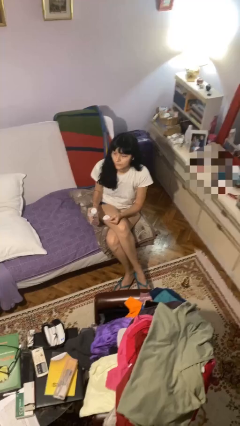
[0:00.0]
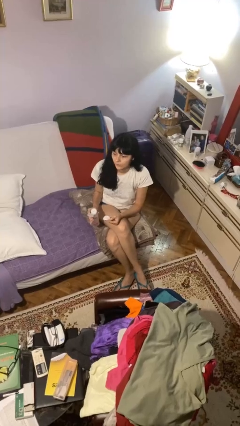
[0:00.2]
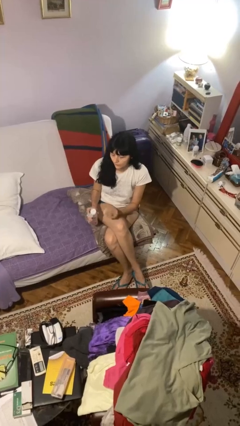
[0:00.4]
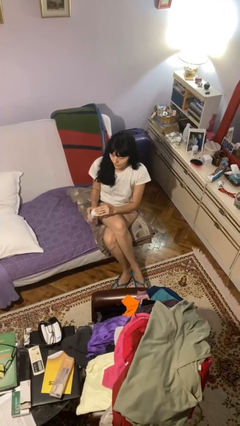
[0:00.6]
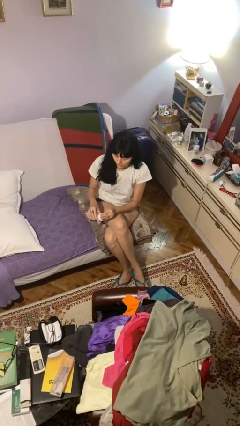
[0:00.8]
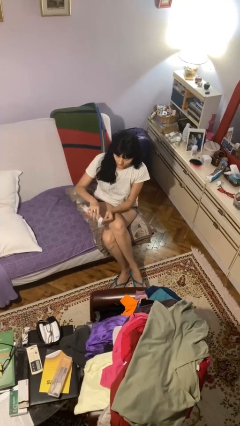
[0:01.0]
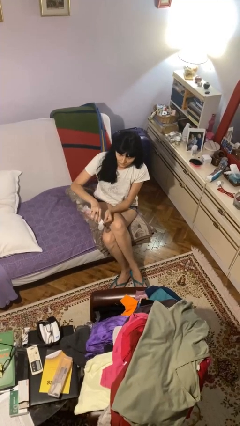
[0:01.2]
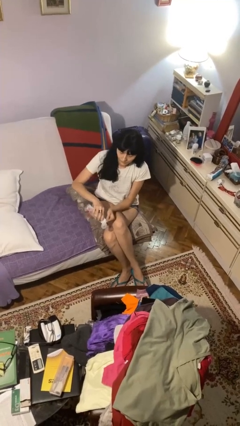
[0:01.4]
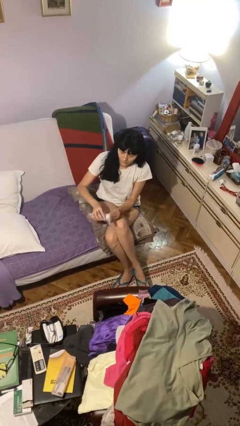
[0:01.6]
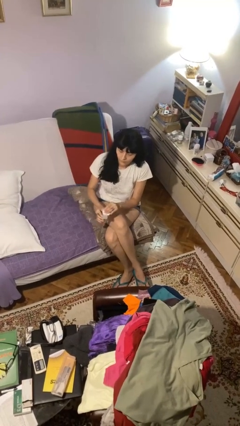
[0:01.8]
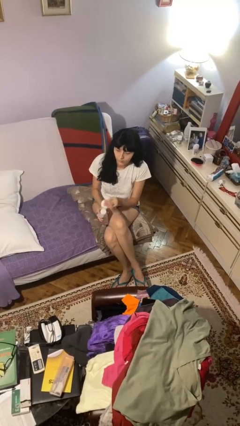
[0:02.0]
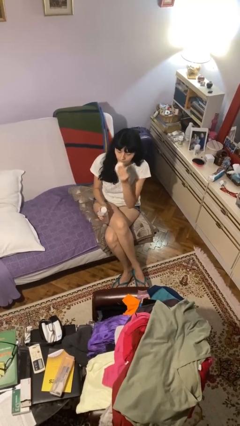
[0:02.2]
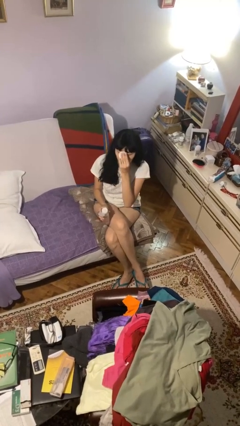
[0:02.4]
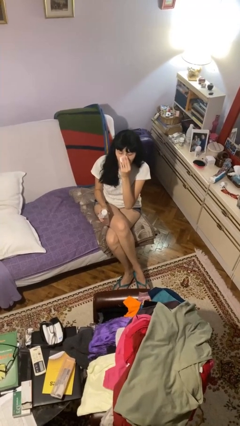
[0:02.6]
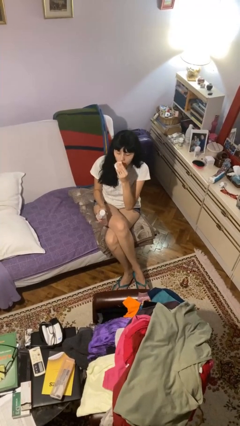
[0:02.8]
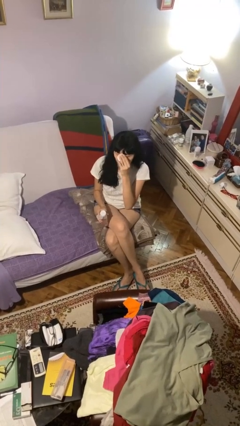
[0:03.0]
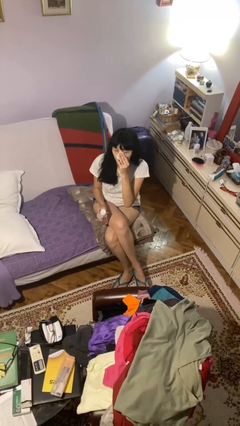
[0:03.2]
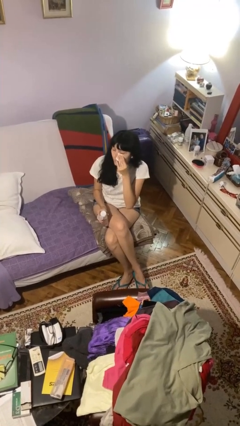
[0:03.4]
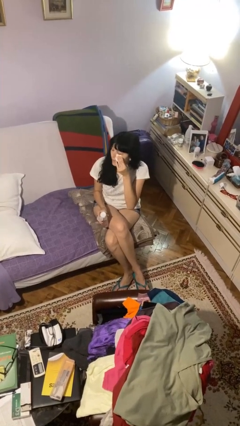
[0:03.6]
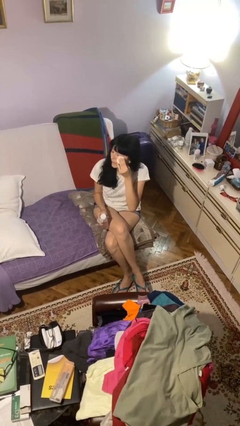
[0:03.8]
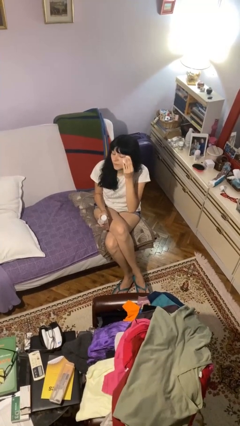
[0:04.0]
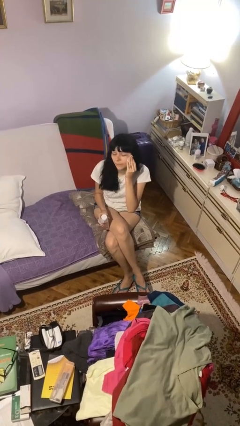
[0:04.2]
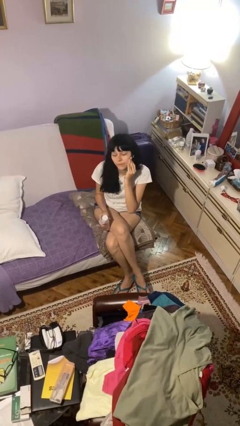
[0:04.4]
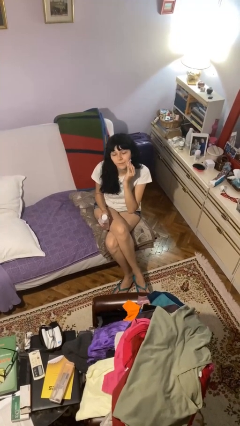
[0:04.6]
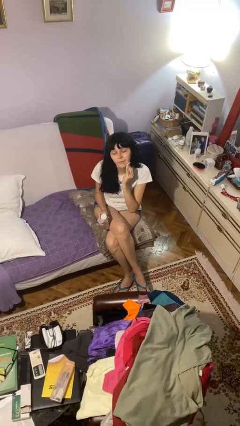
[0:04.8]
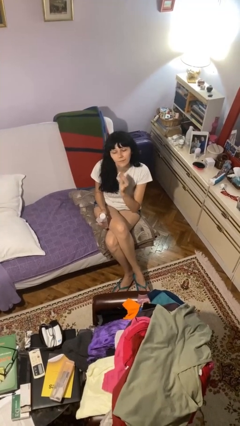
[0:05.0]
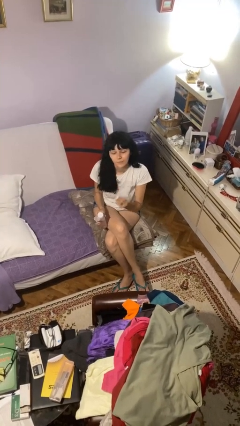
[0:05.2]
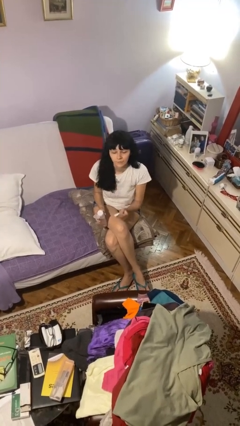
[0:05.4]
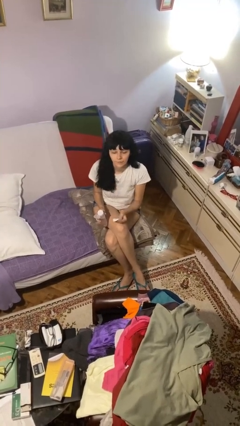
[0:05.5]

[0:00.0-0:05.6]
person applies facial moisturizer

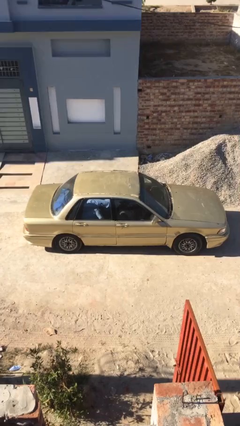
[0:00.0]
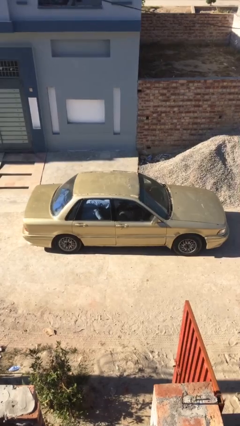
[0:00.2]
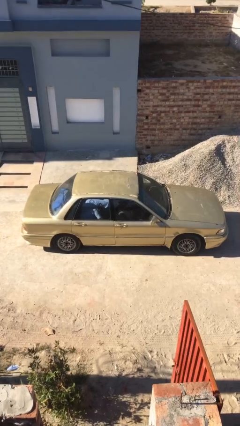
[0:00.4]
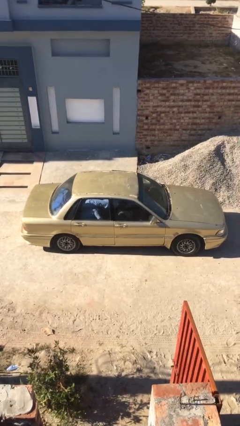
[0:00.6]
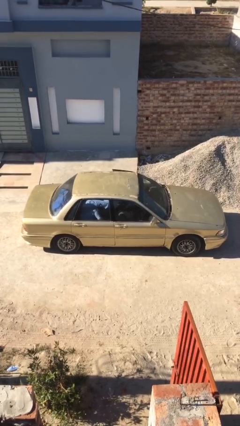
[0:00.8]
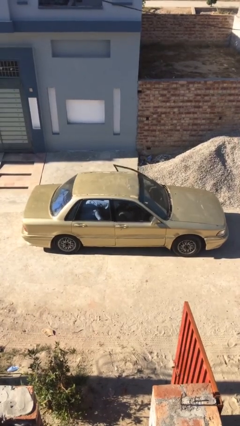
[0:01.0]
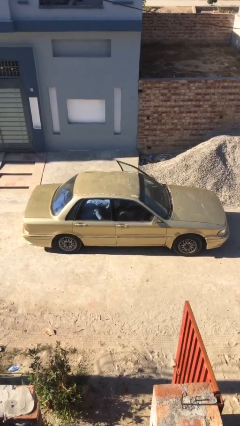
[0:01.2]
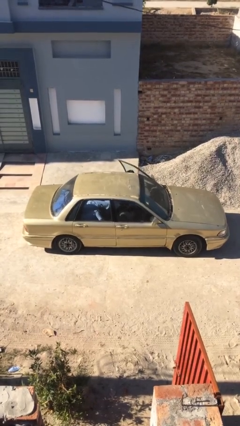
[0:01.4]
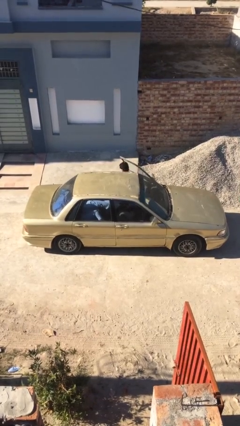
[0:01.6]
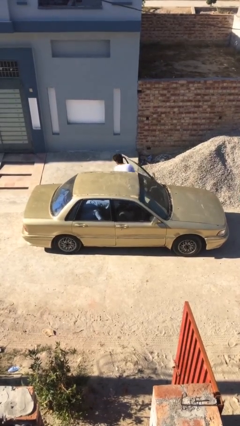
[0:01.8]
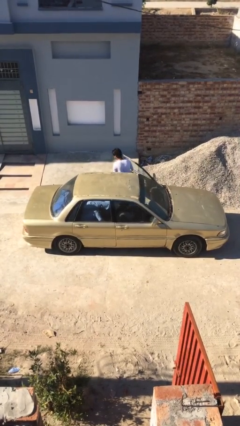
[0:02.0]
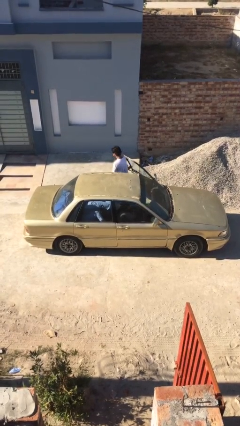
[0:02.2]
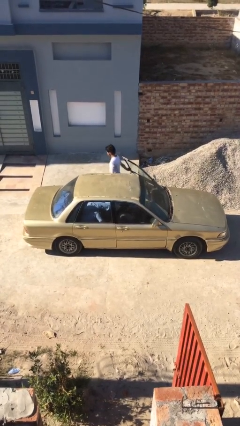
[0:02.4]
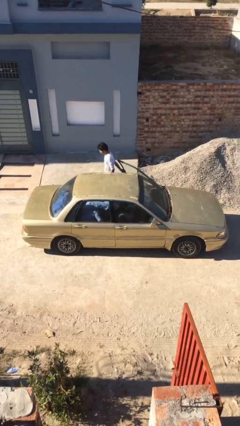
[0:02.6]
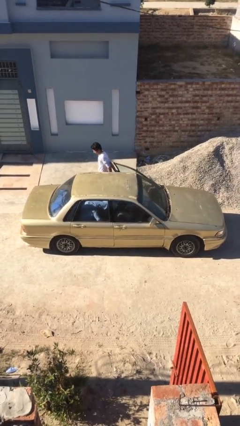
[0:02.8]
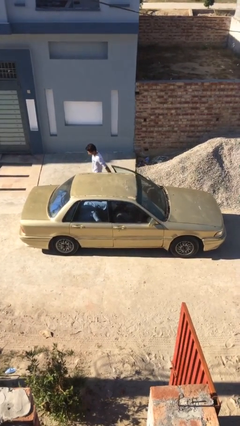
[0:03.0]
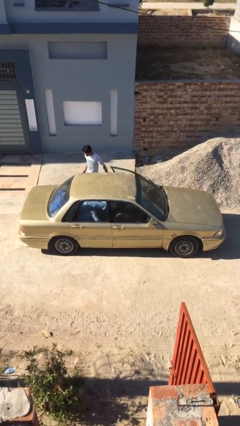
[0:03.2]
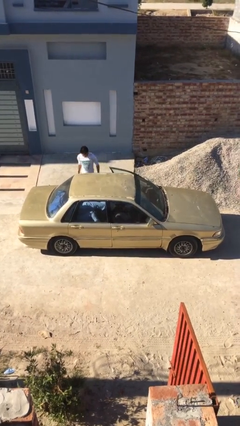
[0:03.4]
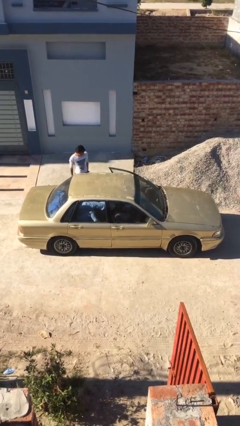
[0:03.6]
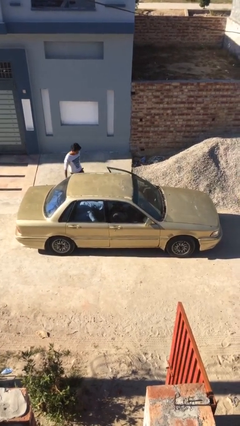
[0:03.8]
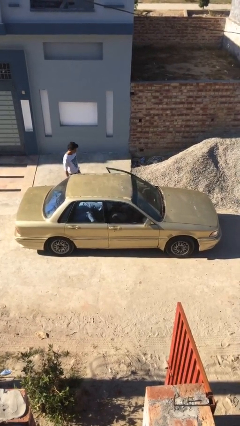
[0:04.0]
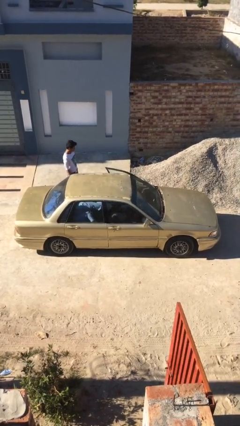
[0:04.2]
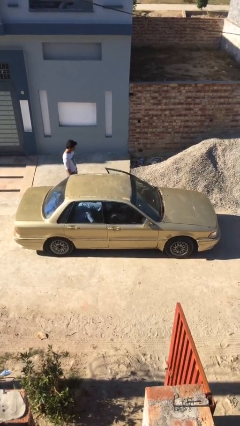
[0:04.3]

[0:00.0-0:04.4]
car drops off person

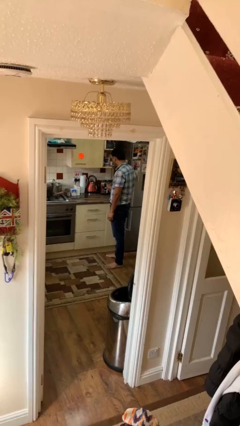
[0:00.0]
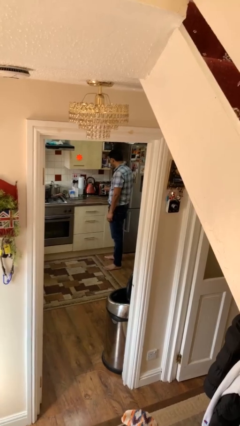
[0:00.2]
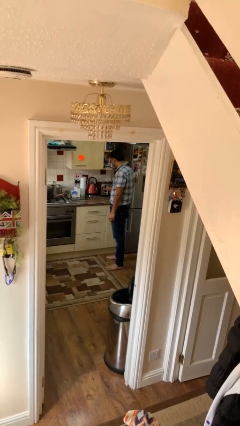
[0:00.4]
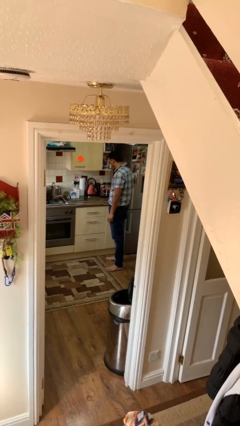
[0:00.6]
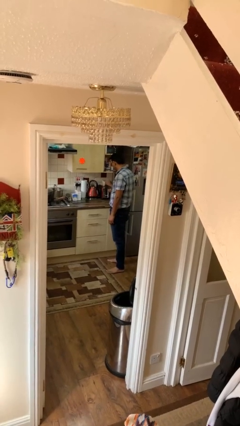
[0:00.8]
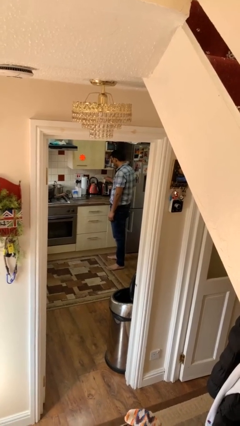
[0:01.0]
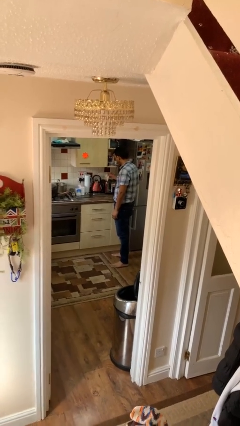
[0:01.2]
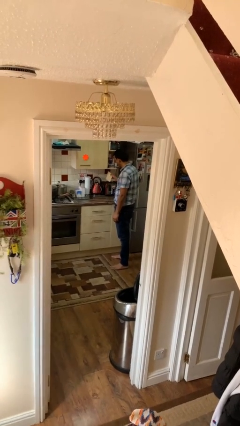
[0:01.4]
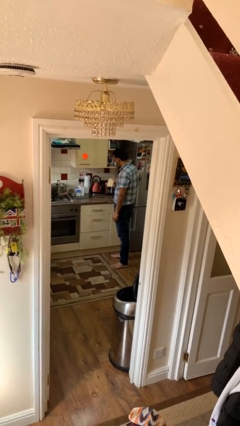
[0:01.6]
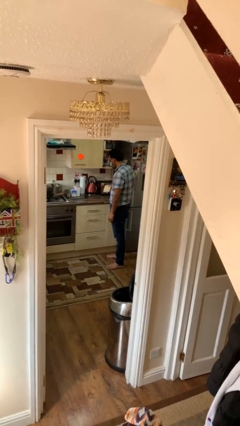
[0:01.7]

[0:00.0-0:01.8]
person takes object from toaster

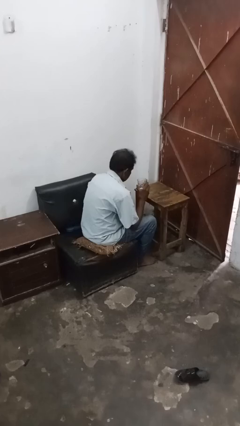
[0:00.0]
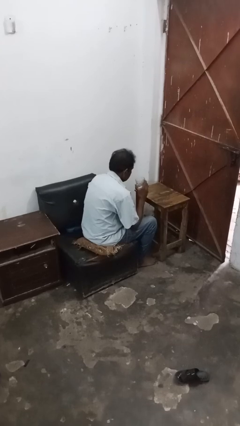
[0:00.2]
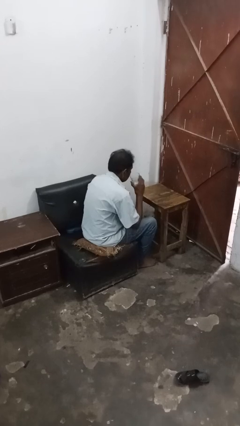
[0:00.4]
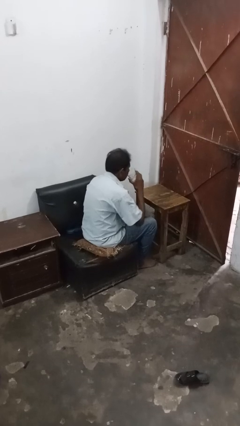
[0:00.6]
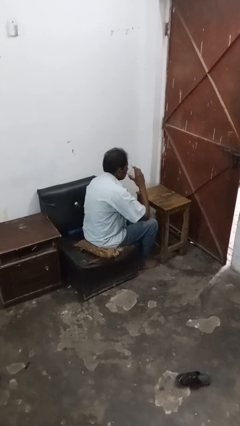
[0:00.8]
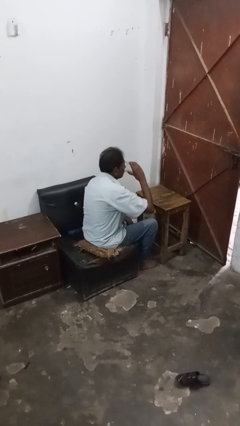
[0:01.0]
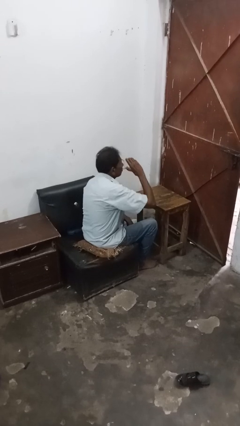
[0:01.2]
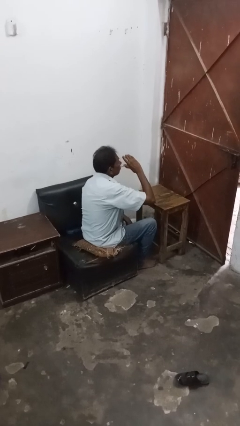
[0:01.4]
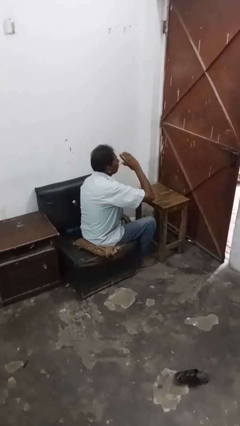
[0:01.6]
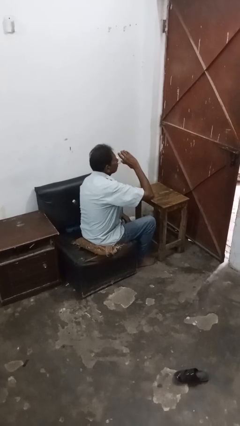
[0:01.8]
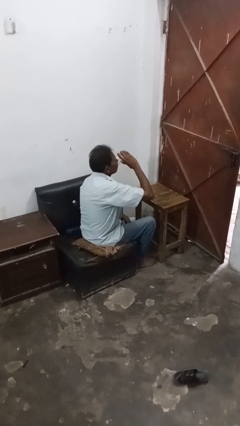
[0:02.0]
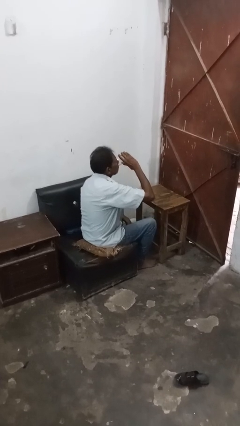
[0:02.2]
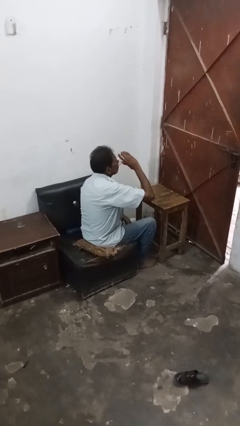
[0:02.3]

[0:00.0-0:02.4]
person drinks from shotglass

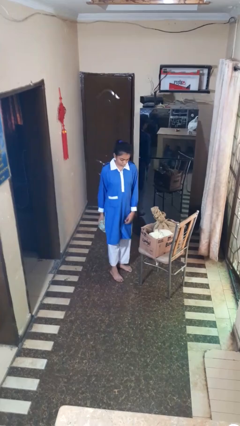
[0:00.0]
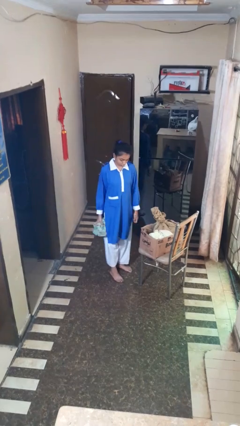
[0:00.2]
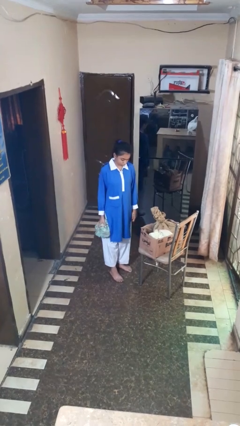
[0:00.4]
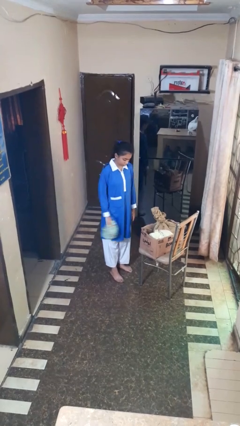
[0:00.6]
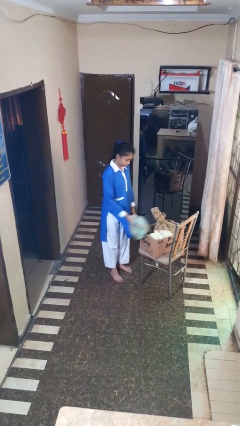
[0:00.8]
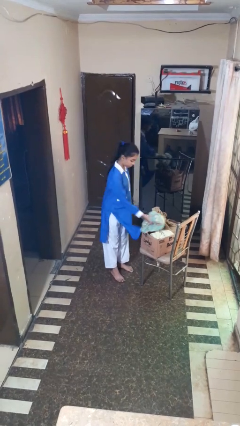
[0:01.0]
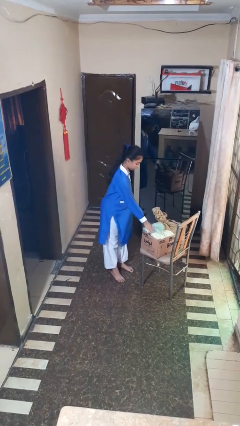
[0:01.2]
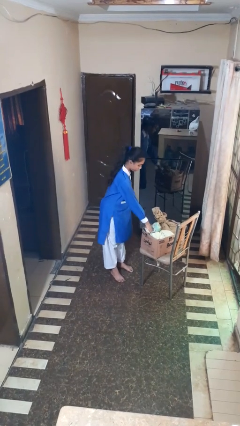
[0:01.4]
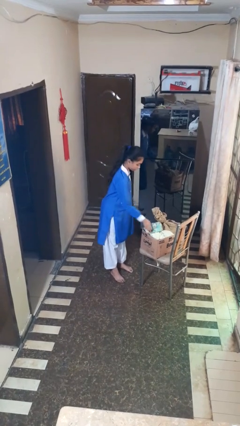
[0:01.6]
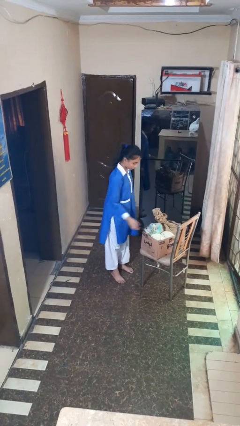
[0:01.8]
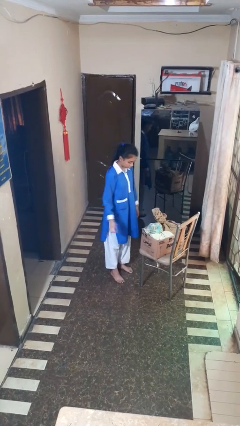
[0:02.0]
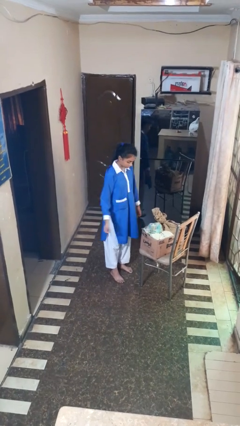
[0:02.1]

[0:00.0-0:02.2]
person puts object into box

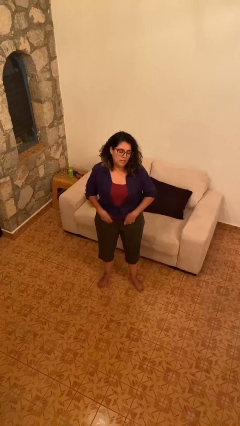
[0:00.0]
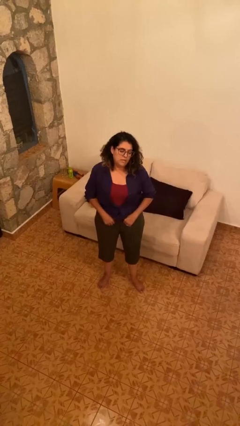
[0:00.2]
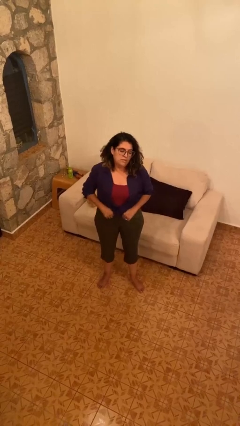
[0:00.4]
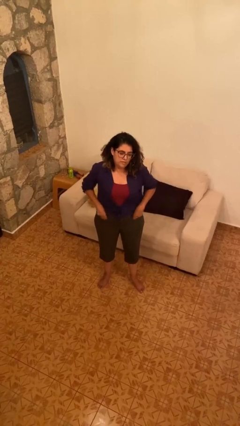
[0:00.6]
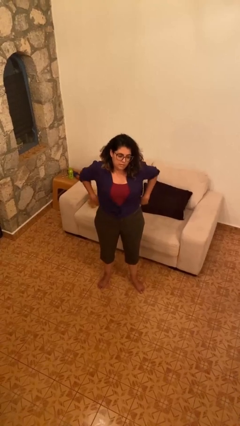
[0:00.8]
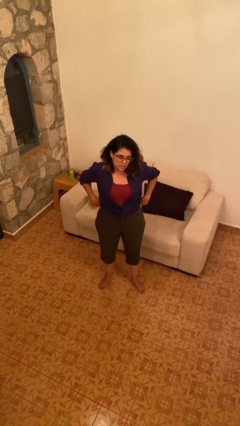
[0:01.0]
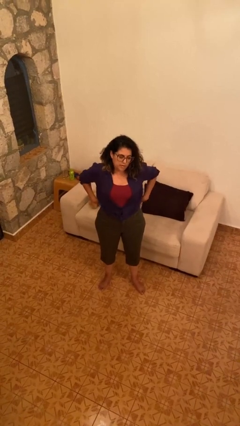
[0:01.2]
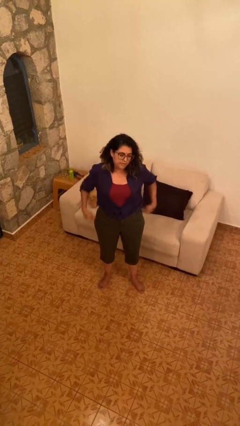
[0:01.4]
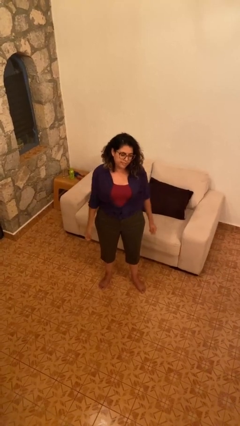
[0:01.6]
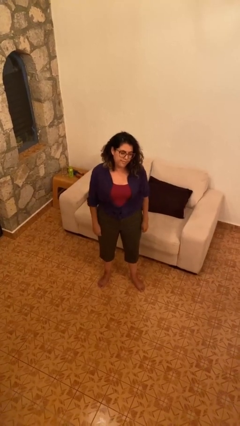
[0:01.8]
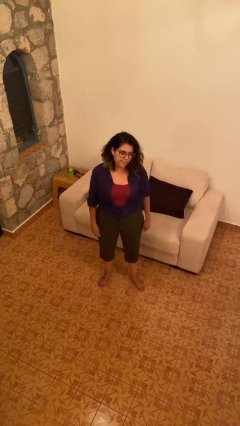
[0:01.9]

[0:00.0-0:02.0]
person hikes up pants
